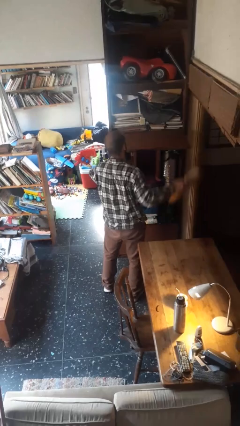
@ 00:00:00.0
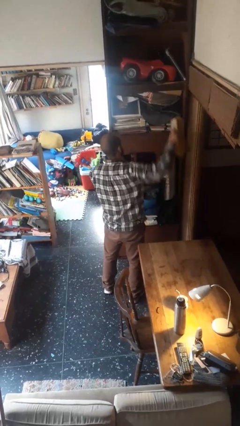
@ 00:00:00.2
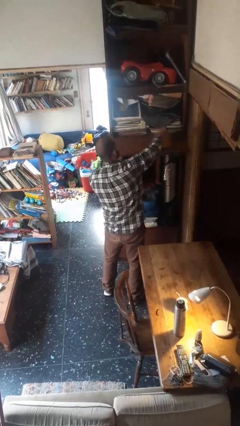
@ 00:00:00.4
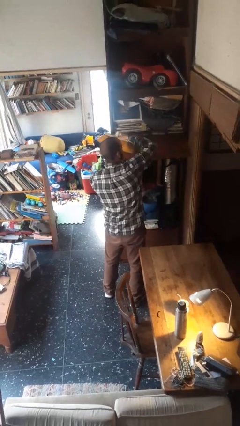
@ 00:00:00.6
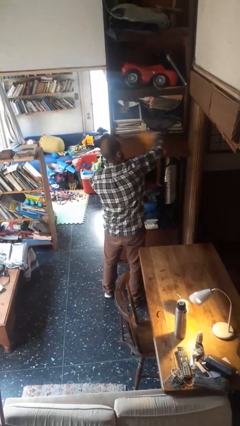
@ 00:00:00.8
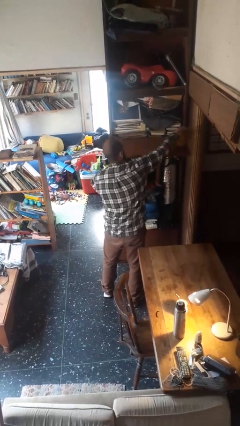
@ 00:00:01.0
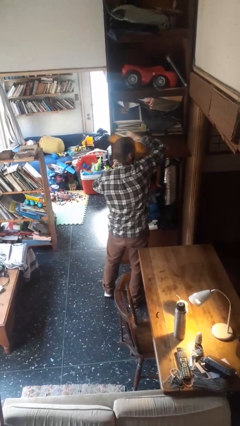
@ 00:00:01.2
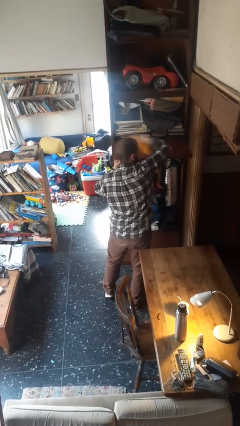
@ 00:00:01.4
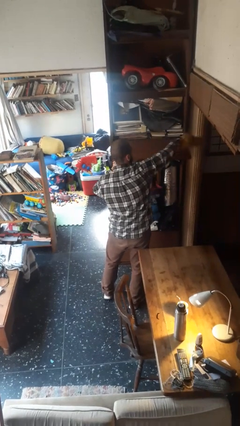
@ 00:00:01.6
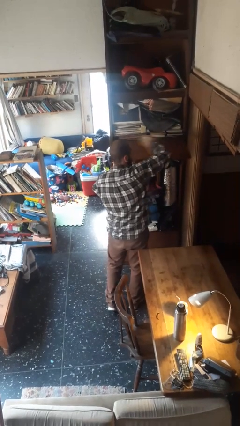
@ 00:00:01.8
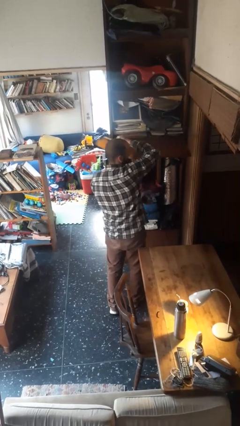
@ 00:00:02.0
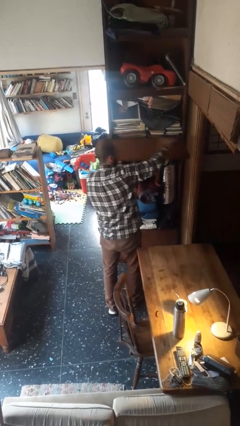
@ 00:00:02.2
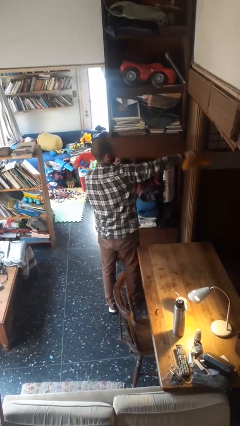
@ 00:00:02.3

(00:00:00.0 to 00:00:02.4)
person dusts furniture

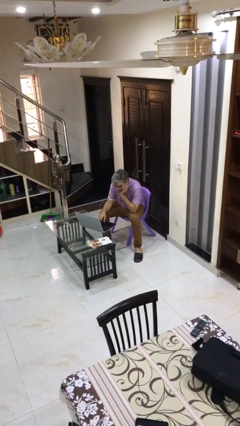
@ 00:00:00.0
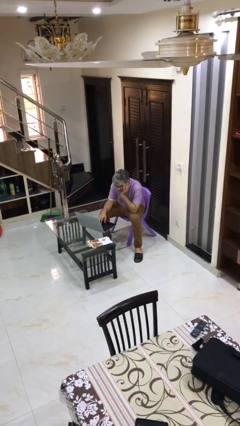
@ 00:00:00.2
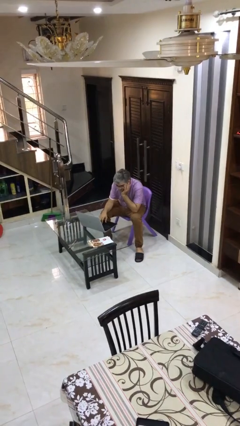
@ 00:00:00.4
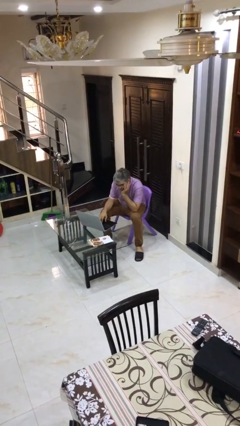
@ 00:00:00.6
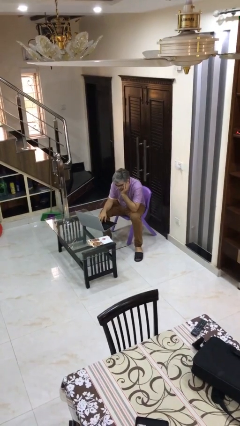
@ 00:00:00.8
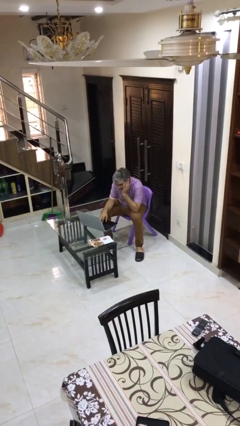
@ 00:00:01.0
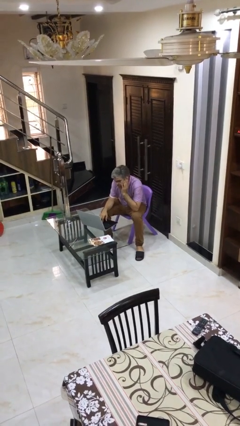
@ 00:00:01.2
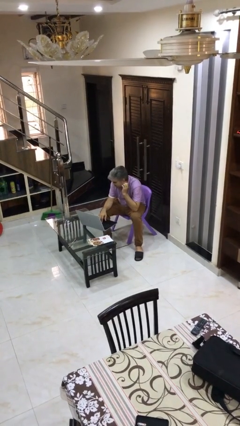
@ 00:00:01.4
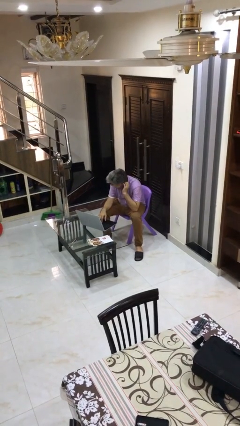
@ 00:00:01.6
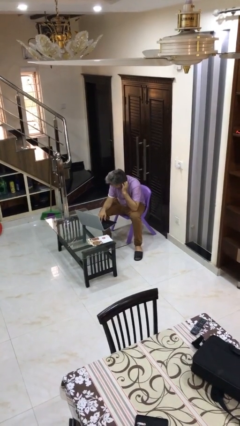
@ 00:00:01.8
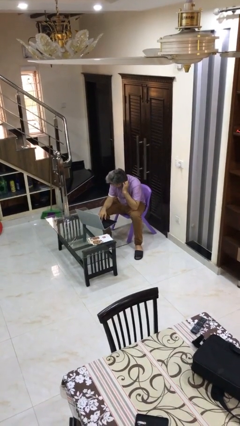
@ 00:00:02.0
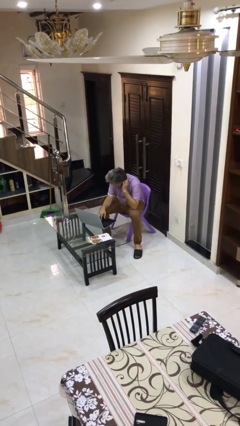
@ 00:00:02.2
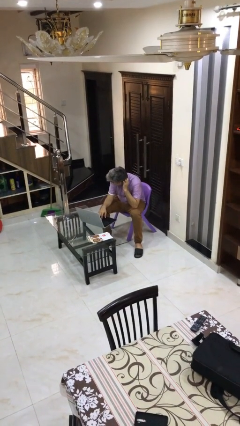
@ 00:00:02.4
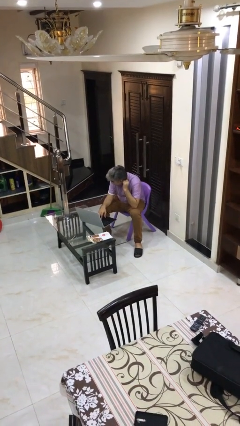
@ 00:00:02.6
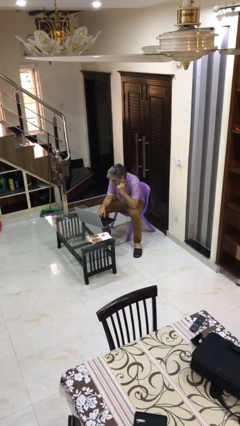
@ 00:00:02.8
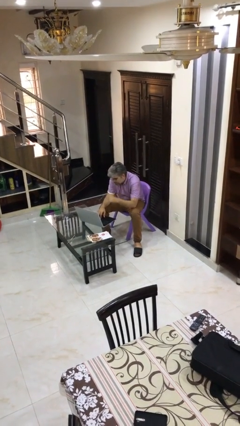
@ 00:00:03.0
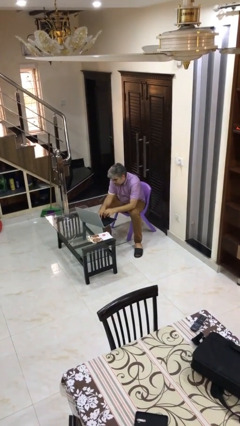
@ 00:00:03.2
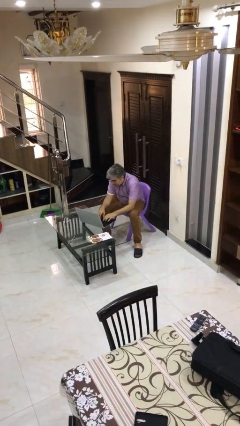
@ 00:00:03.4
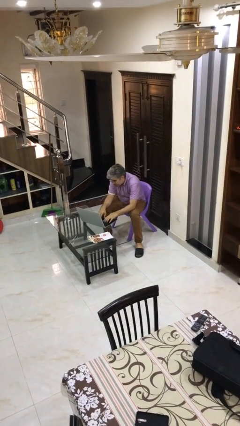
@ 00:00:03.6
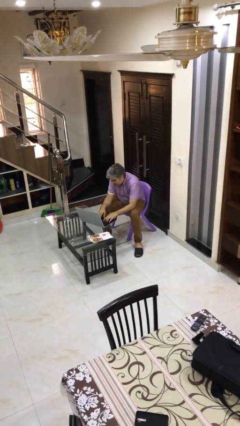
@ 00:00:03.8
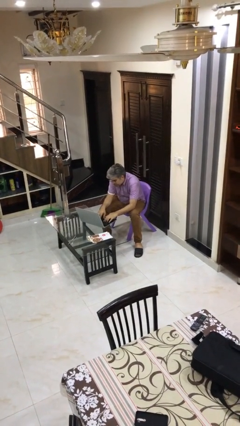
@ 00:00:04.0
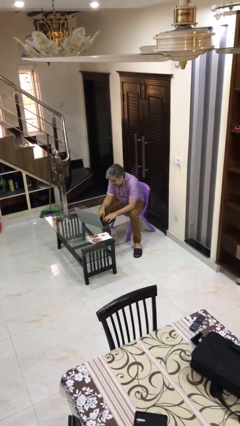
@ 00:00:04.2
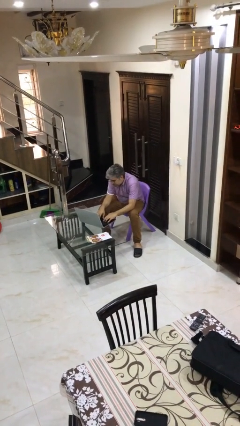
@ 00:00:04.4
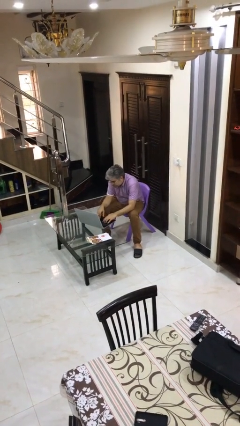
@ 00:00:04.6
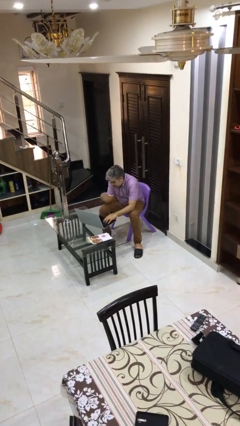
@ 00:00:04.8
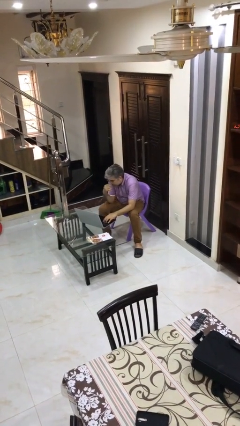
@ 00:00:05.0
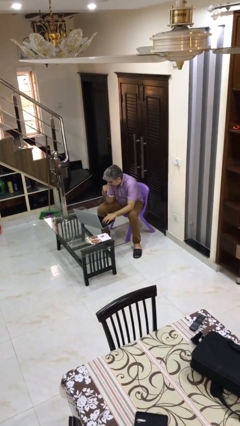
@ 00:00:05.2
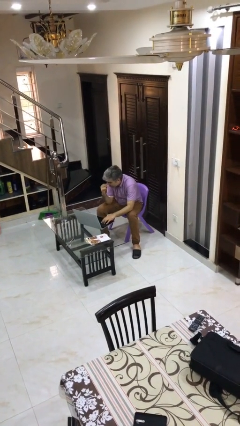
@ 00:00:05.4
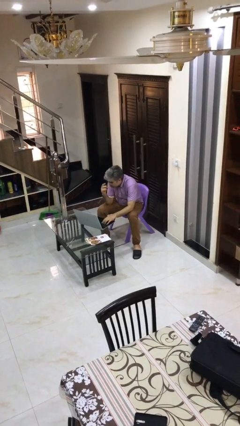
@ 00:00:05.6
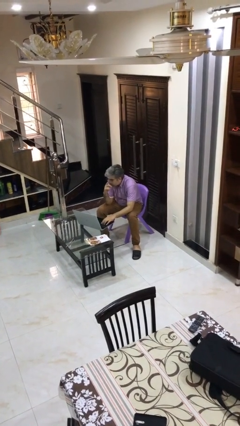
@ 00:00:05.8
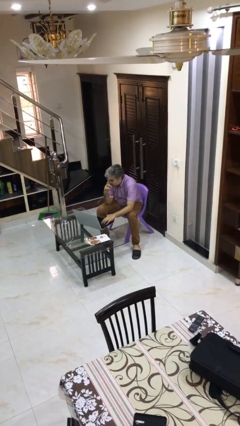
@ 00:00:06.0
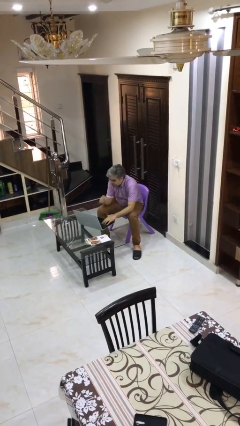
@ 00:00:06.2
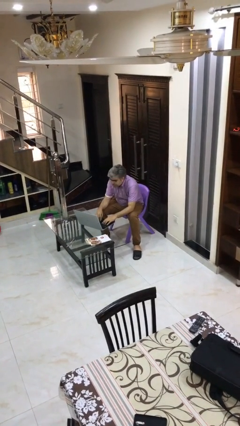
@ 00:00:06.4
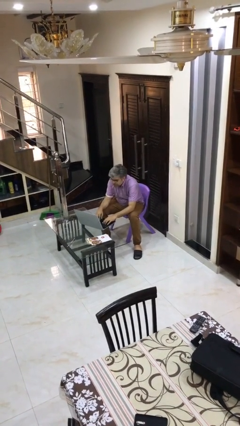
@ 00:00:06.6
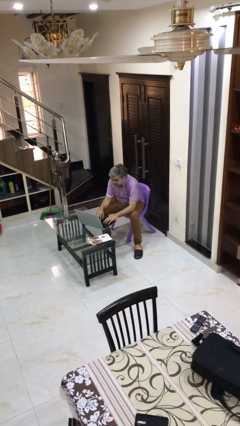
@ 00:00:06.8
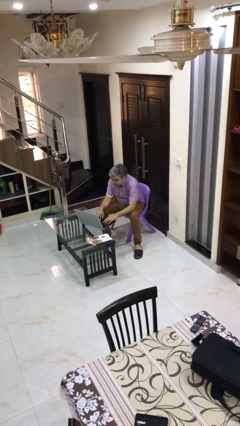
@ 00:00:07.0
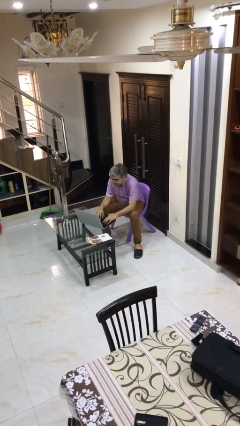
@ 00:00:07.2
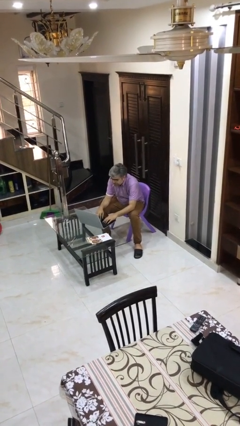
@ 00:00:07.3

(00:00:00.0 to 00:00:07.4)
person interacts with laptop

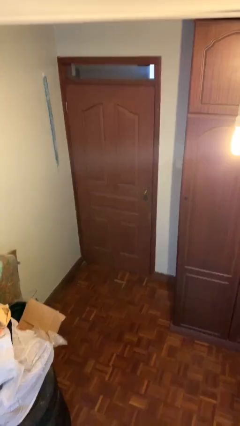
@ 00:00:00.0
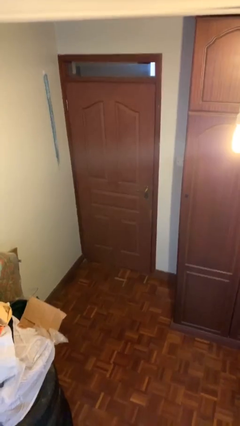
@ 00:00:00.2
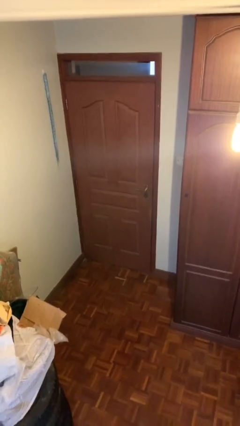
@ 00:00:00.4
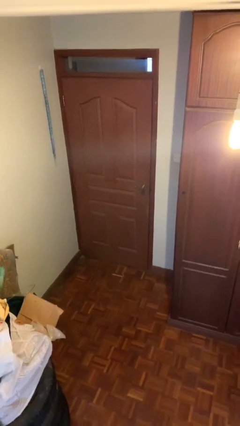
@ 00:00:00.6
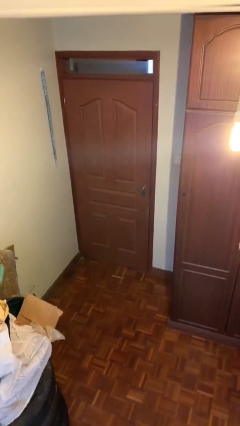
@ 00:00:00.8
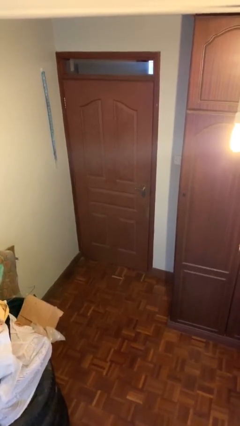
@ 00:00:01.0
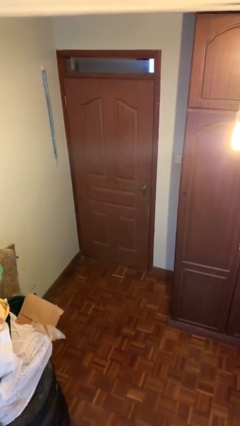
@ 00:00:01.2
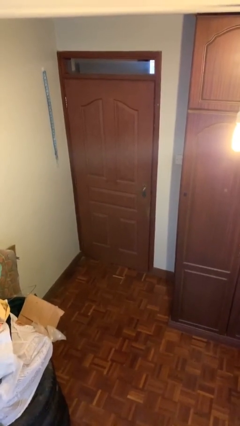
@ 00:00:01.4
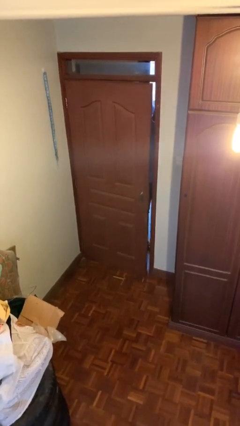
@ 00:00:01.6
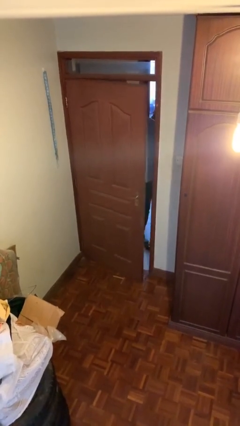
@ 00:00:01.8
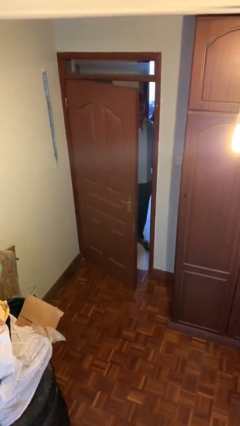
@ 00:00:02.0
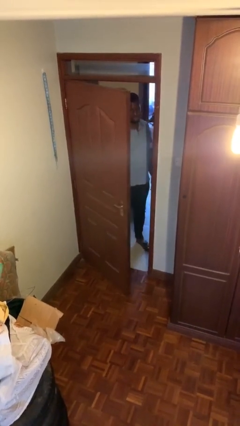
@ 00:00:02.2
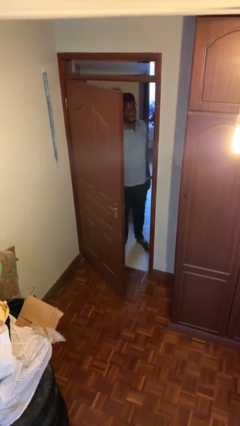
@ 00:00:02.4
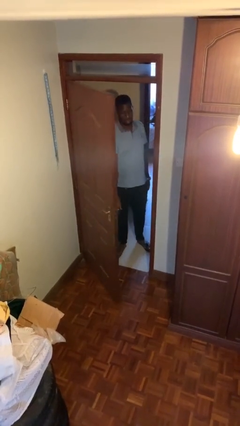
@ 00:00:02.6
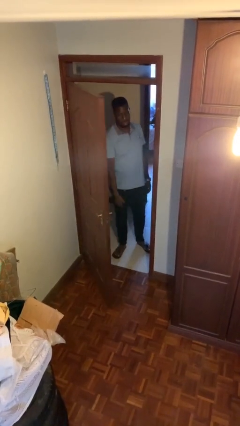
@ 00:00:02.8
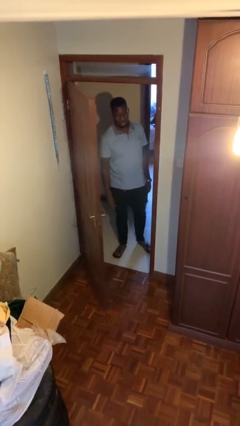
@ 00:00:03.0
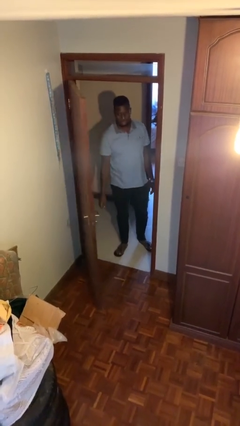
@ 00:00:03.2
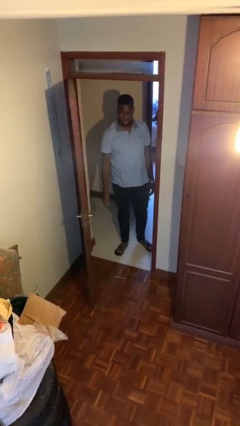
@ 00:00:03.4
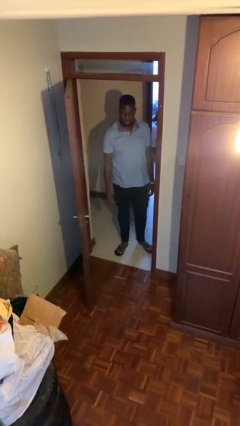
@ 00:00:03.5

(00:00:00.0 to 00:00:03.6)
person opens facility door

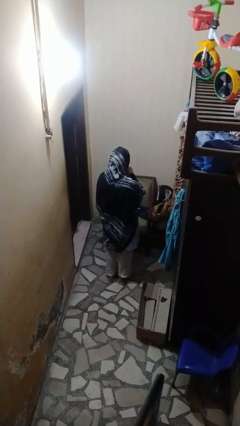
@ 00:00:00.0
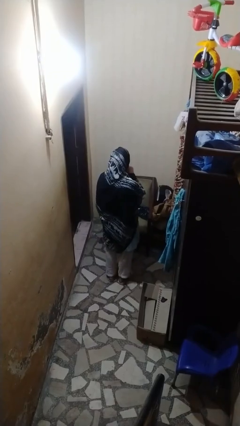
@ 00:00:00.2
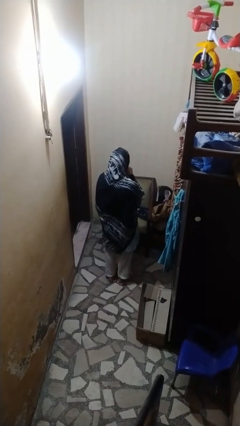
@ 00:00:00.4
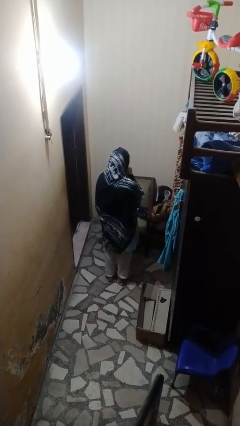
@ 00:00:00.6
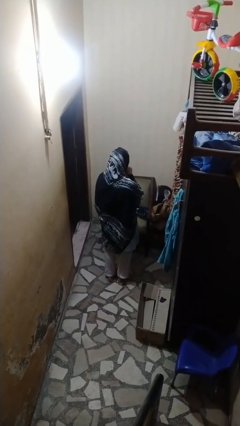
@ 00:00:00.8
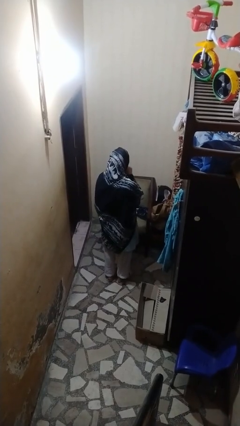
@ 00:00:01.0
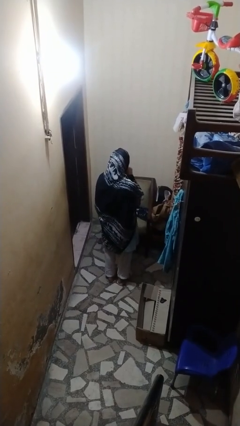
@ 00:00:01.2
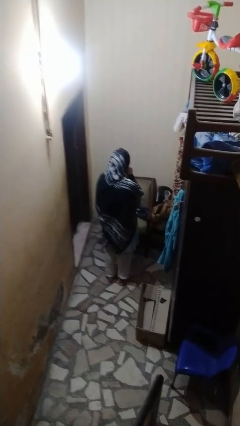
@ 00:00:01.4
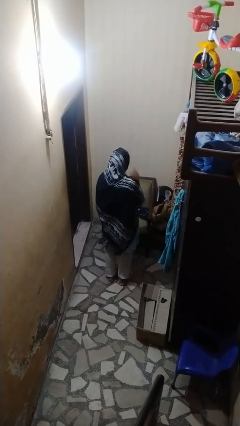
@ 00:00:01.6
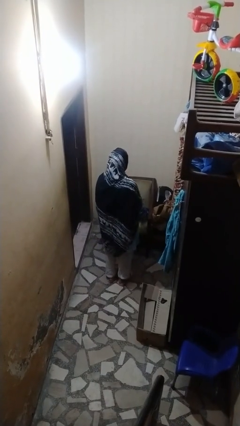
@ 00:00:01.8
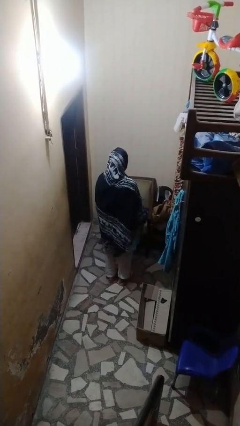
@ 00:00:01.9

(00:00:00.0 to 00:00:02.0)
person gestures be quiet

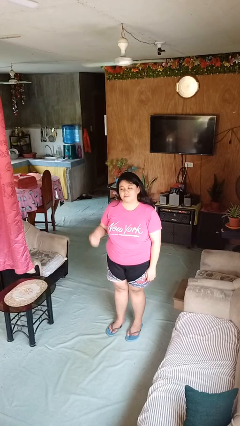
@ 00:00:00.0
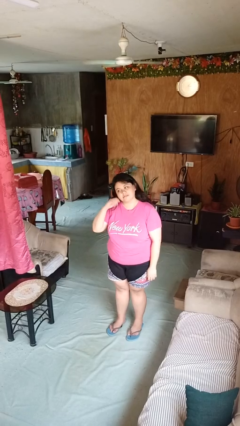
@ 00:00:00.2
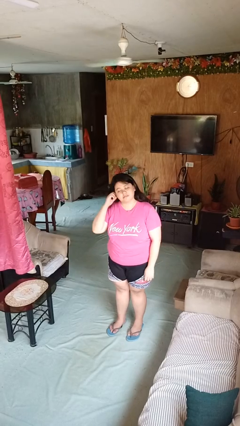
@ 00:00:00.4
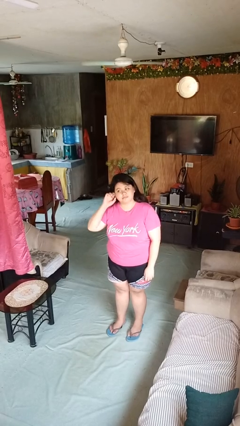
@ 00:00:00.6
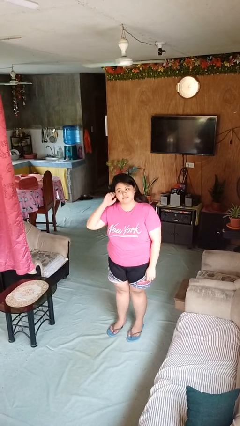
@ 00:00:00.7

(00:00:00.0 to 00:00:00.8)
person touches earlobe

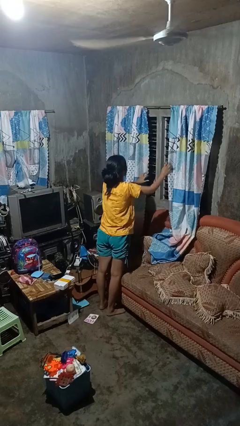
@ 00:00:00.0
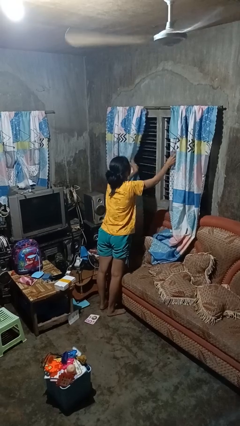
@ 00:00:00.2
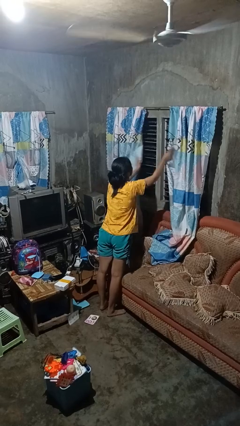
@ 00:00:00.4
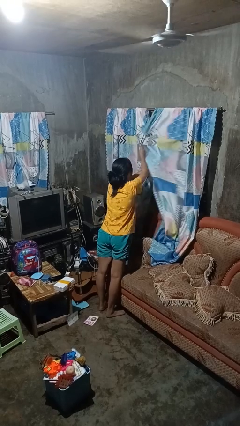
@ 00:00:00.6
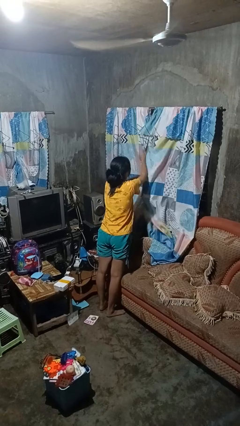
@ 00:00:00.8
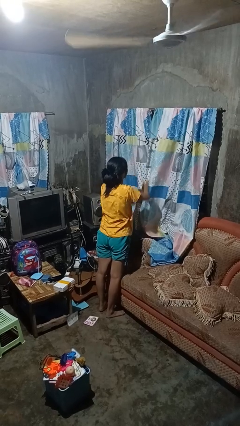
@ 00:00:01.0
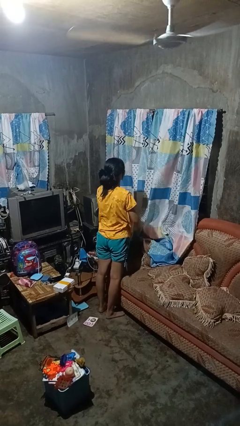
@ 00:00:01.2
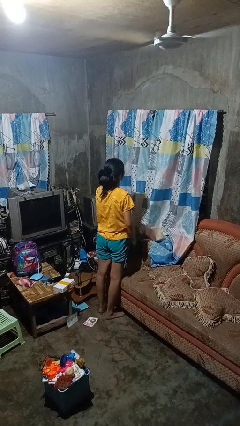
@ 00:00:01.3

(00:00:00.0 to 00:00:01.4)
person closes curtains
